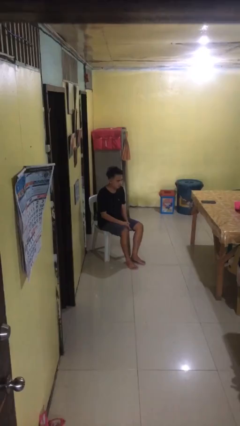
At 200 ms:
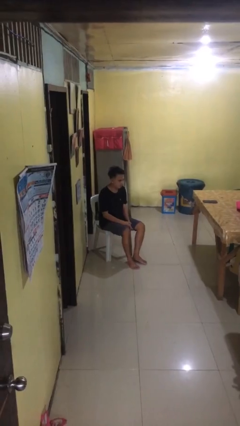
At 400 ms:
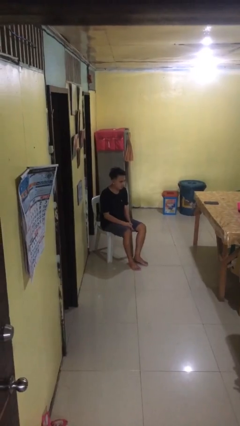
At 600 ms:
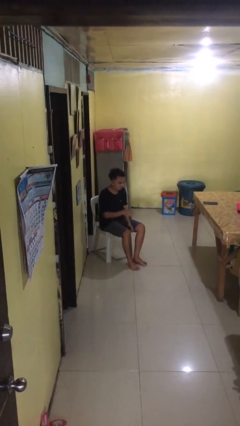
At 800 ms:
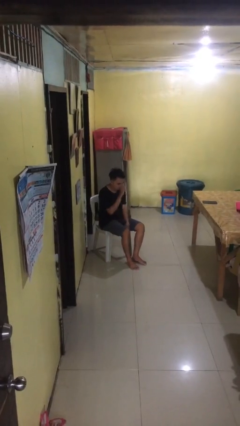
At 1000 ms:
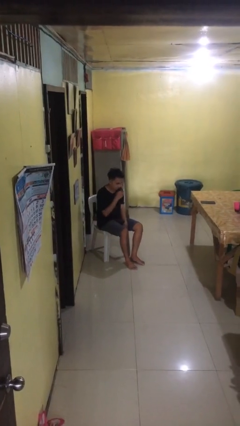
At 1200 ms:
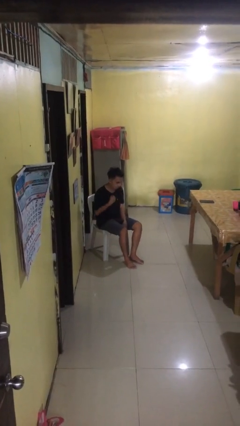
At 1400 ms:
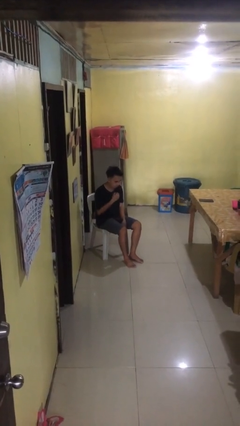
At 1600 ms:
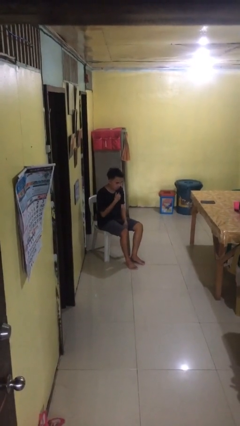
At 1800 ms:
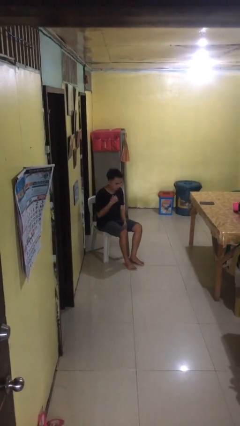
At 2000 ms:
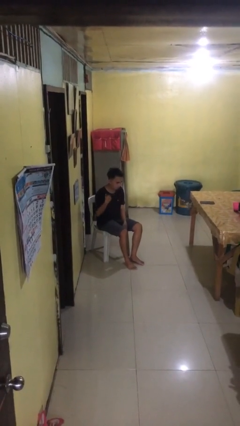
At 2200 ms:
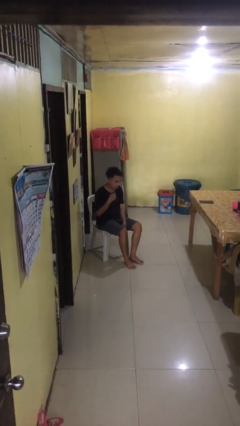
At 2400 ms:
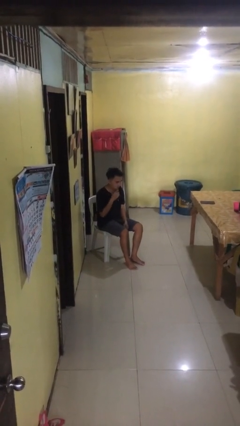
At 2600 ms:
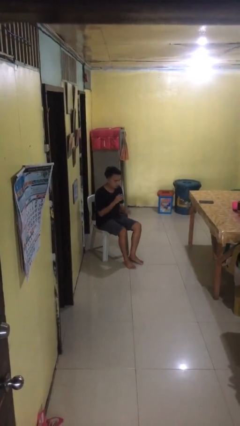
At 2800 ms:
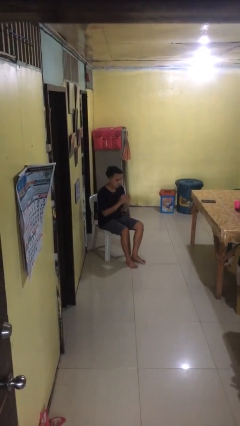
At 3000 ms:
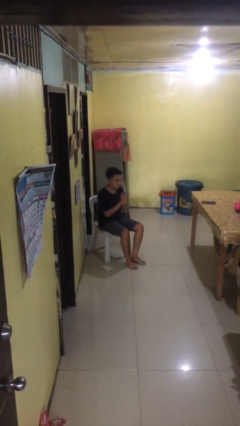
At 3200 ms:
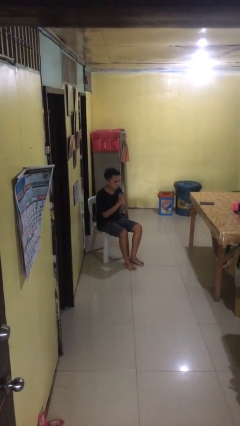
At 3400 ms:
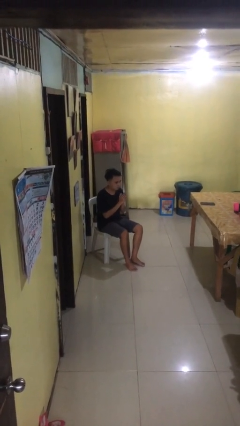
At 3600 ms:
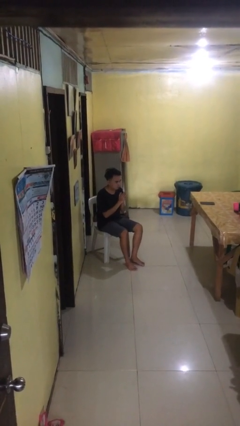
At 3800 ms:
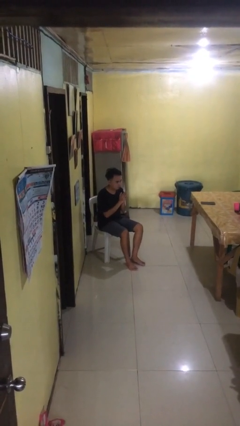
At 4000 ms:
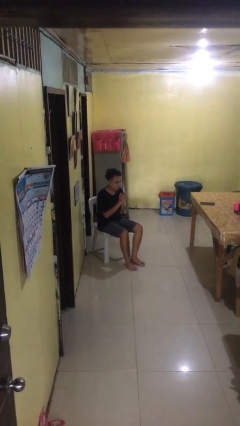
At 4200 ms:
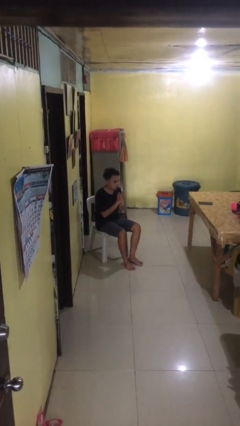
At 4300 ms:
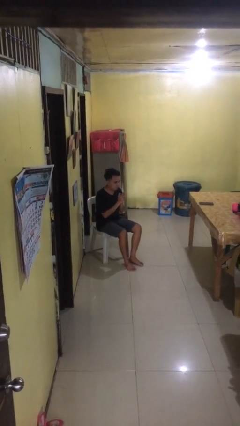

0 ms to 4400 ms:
person prays

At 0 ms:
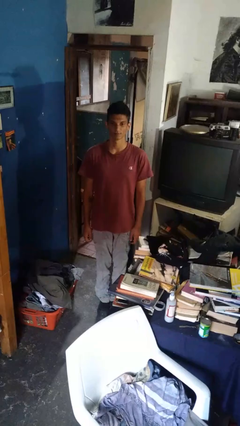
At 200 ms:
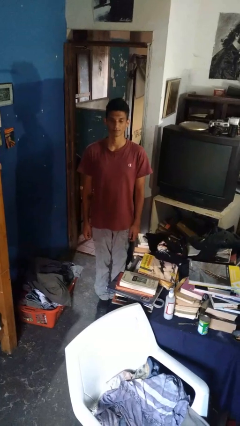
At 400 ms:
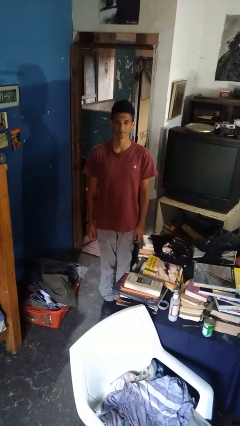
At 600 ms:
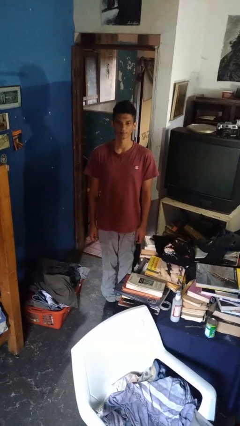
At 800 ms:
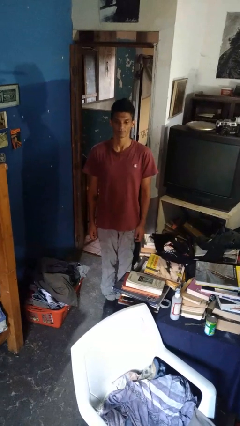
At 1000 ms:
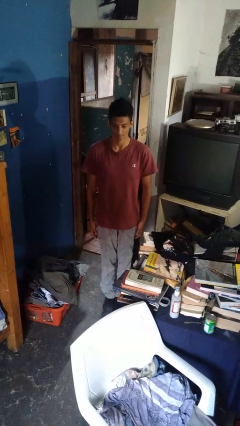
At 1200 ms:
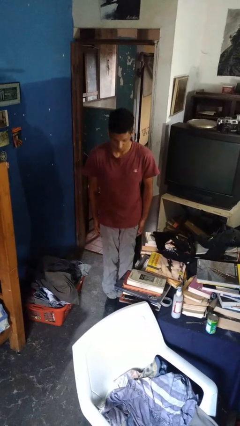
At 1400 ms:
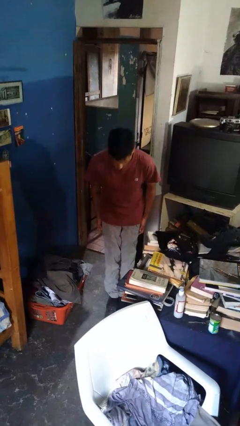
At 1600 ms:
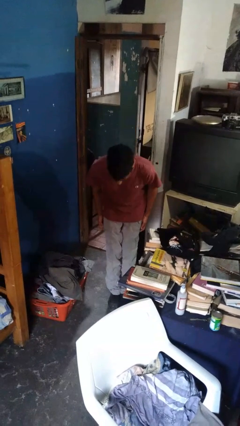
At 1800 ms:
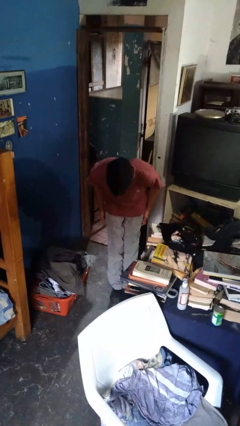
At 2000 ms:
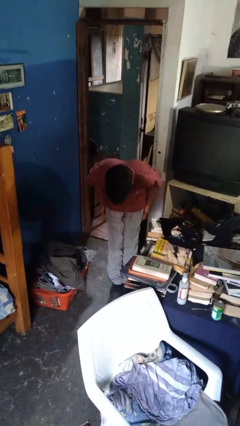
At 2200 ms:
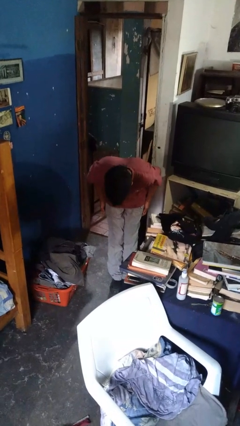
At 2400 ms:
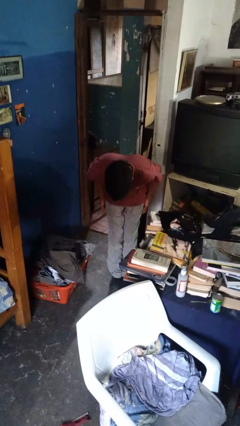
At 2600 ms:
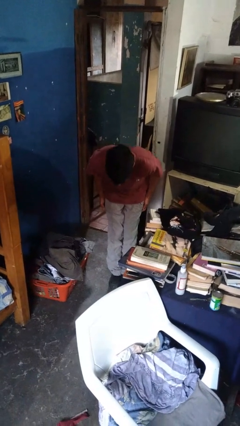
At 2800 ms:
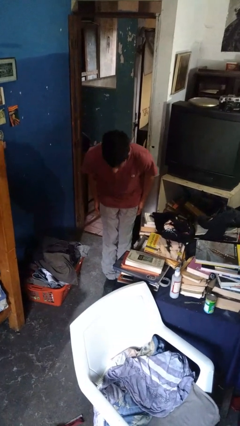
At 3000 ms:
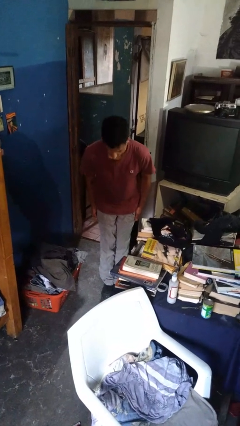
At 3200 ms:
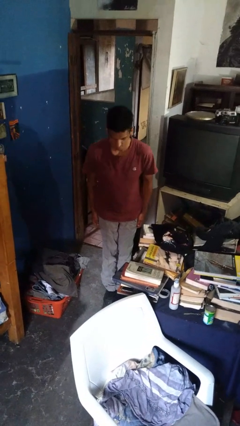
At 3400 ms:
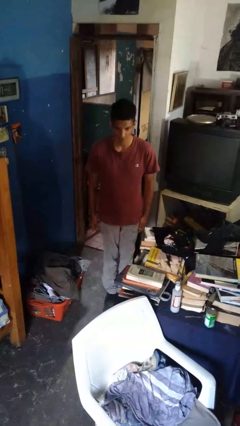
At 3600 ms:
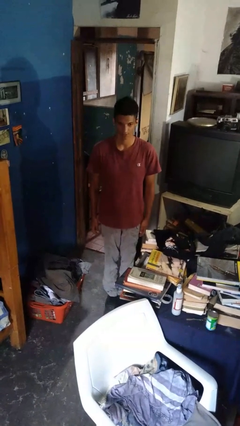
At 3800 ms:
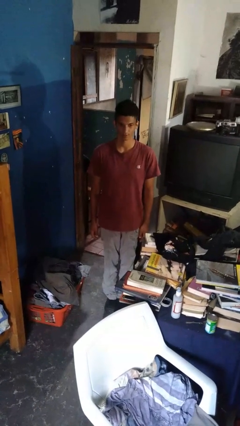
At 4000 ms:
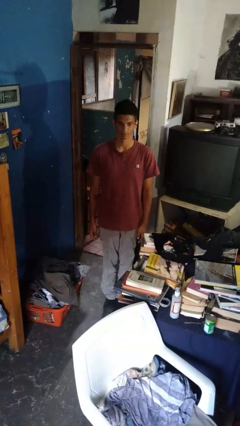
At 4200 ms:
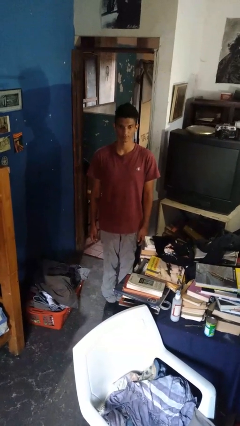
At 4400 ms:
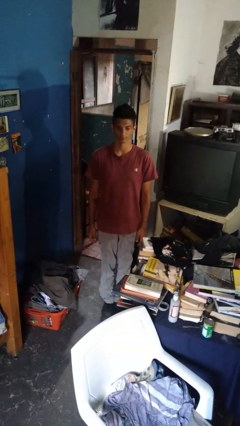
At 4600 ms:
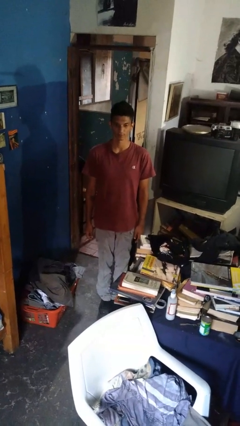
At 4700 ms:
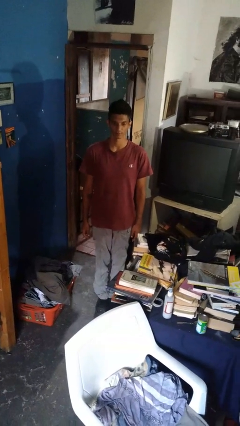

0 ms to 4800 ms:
person bows

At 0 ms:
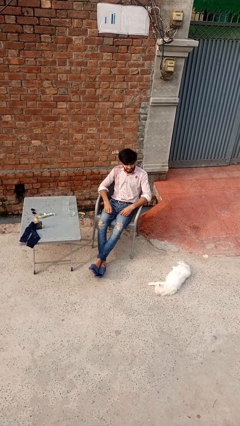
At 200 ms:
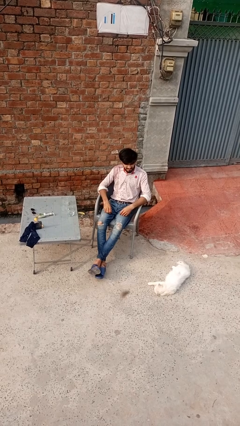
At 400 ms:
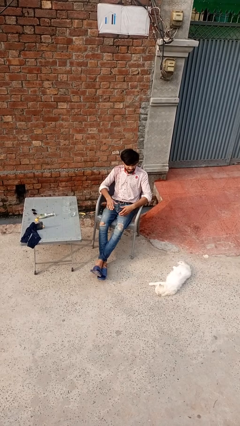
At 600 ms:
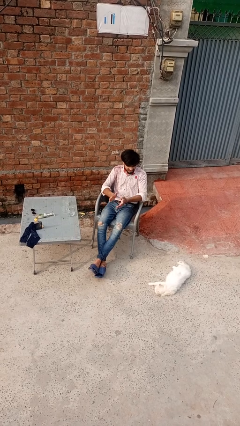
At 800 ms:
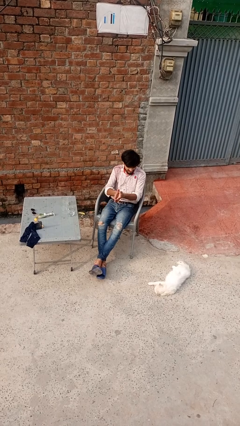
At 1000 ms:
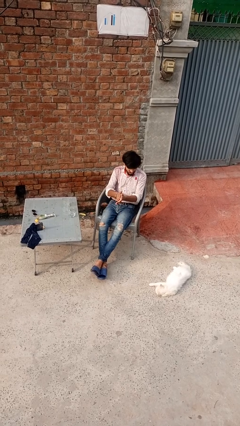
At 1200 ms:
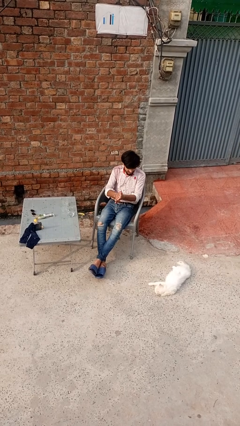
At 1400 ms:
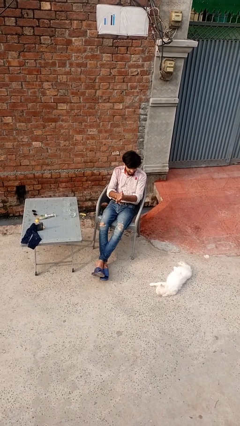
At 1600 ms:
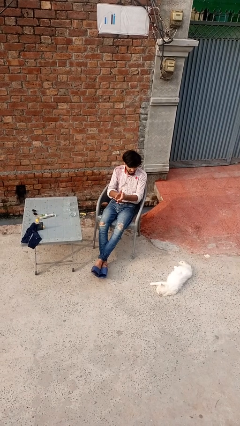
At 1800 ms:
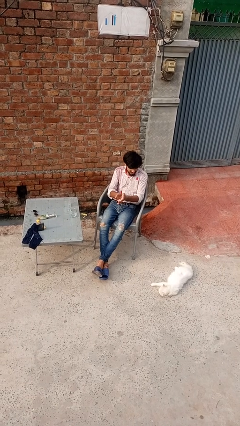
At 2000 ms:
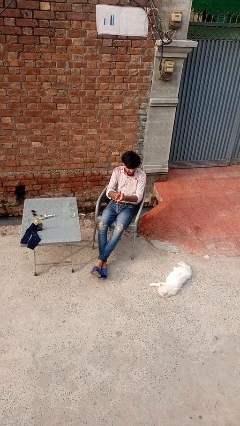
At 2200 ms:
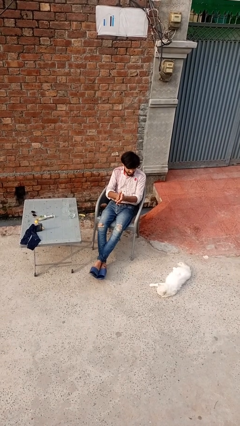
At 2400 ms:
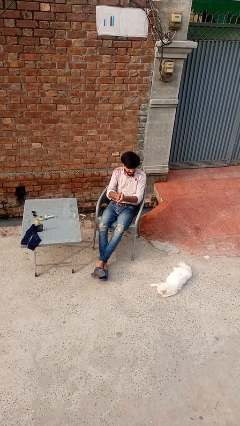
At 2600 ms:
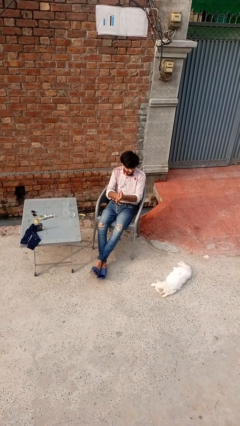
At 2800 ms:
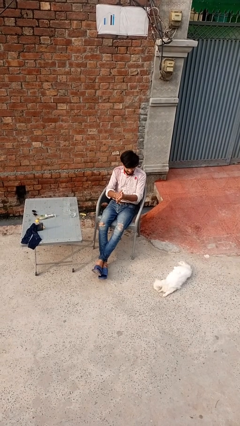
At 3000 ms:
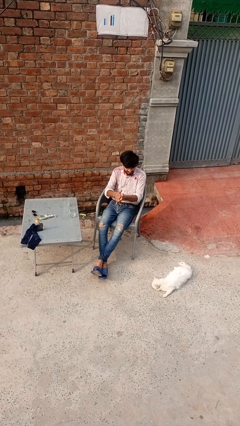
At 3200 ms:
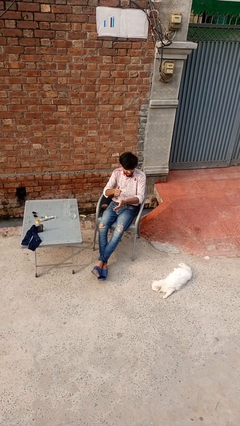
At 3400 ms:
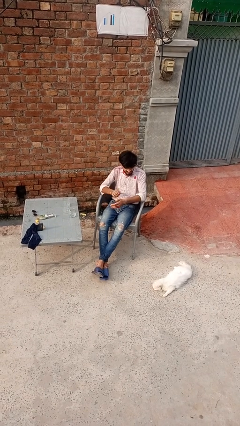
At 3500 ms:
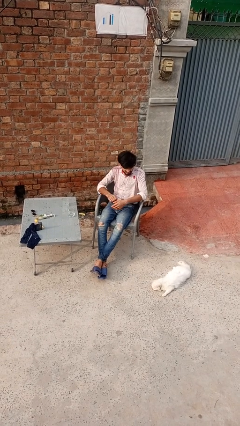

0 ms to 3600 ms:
person claps hands

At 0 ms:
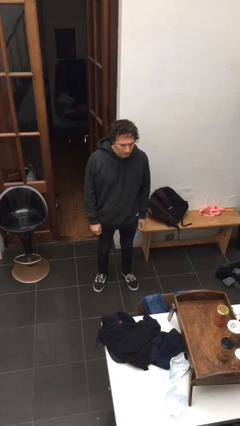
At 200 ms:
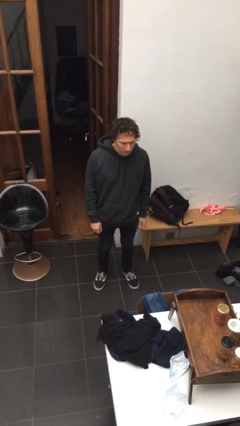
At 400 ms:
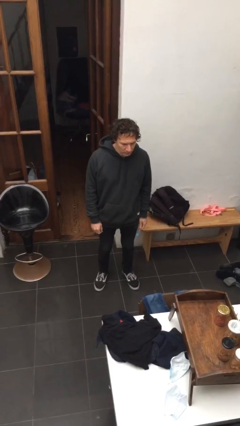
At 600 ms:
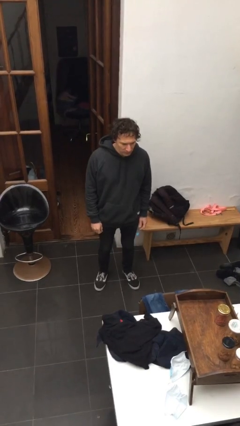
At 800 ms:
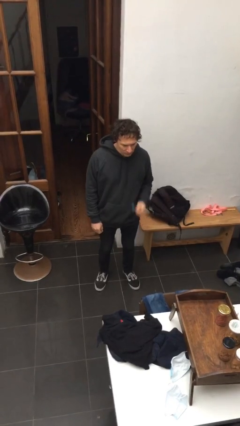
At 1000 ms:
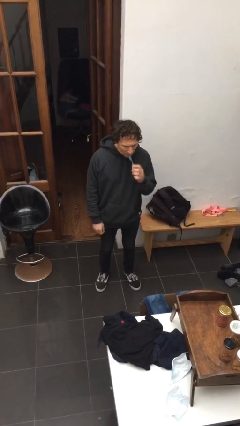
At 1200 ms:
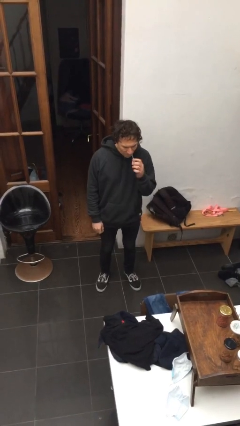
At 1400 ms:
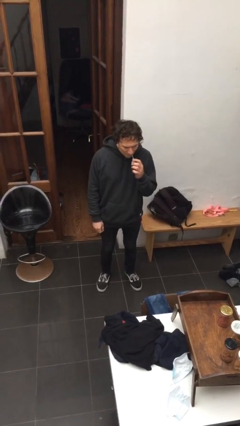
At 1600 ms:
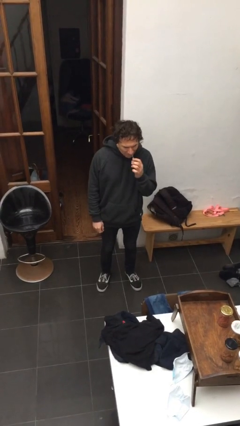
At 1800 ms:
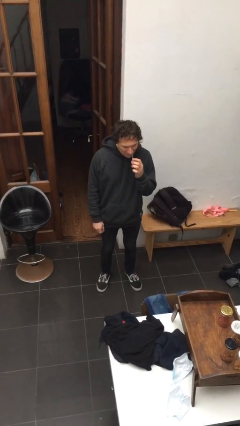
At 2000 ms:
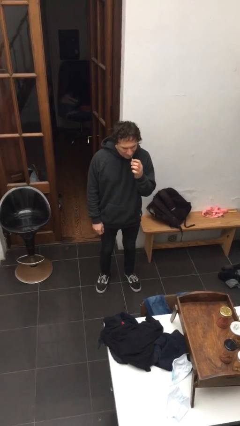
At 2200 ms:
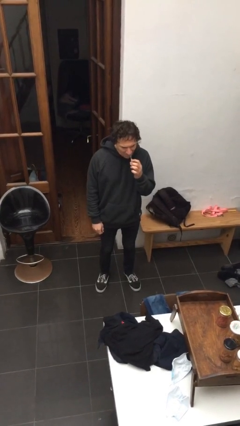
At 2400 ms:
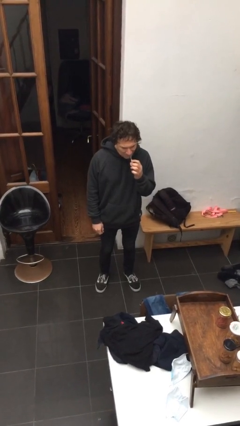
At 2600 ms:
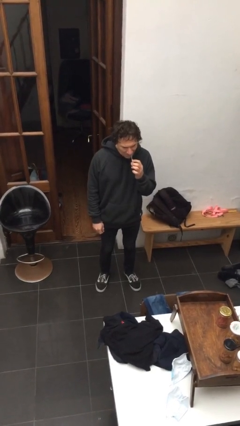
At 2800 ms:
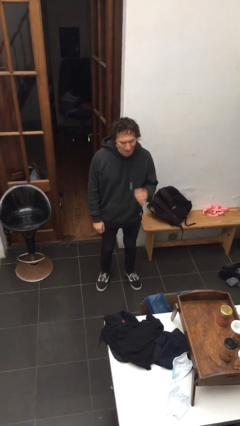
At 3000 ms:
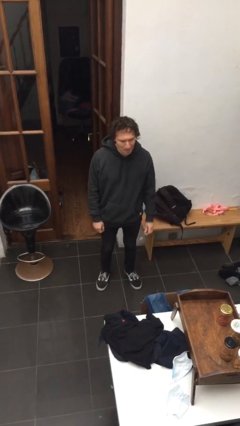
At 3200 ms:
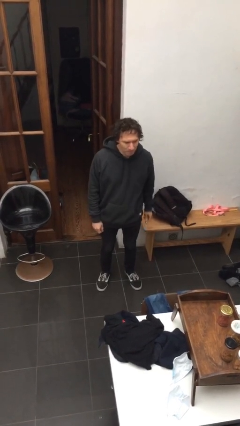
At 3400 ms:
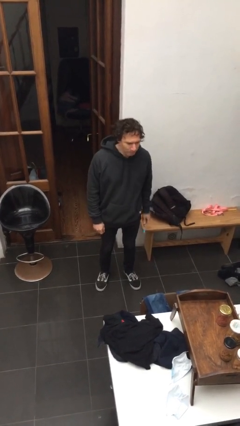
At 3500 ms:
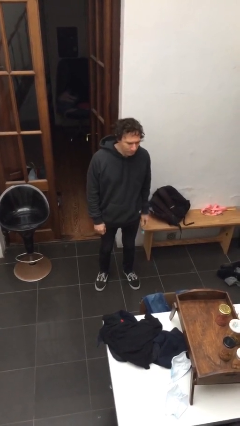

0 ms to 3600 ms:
person flosses

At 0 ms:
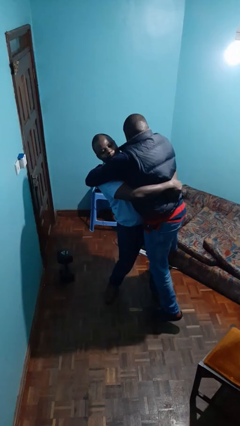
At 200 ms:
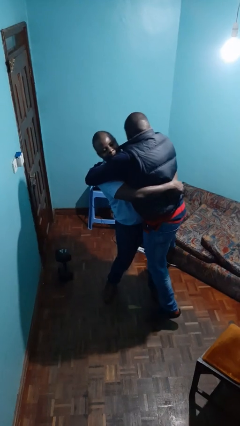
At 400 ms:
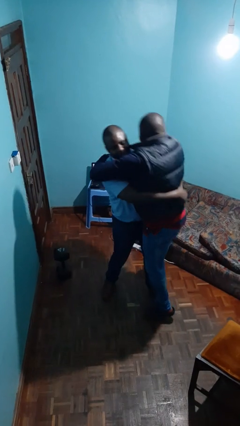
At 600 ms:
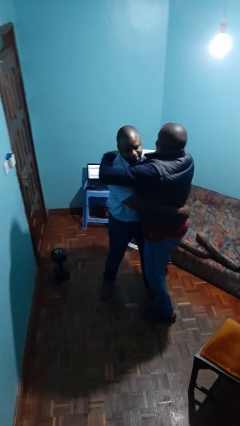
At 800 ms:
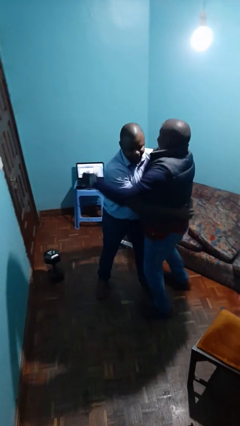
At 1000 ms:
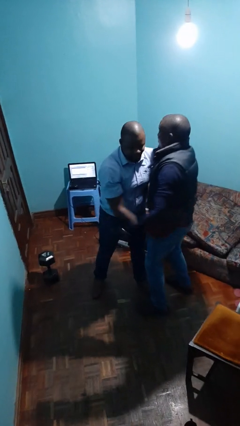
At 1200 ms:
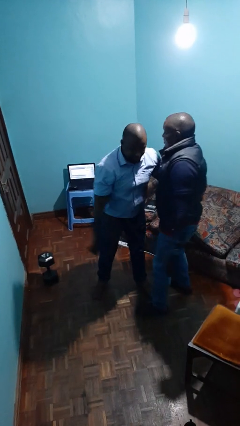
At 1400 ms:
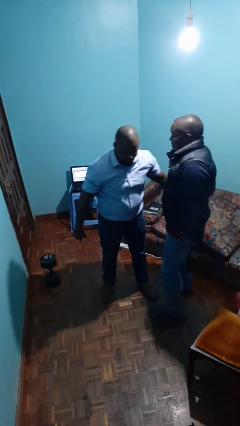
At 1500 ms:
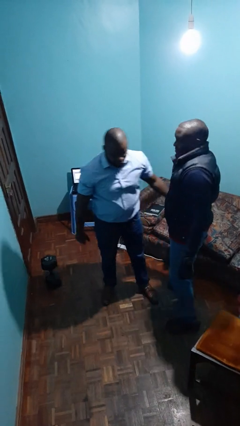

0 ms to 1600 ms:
person puts down person
